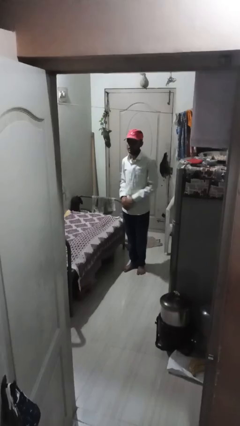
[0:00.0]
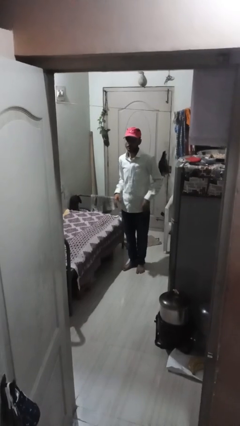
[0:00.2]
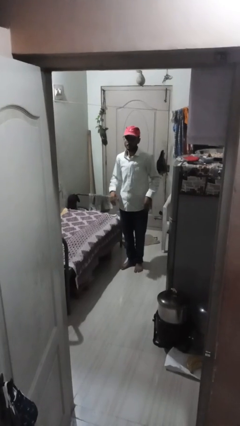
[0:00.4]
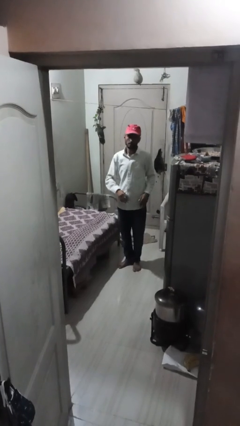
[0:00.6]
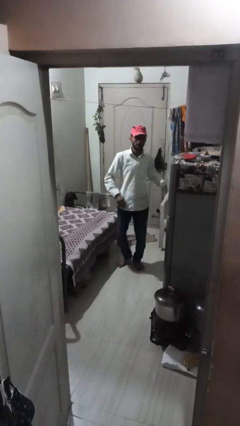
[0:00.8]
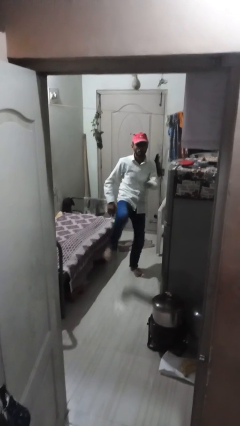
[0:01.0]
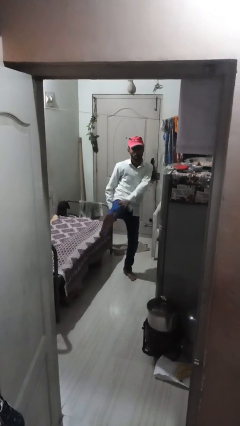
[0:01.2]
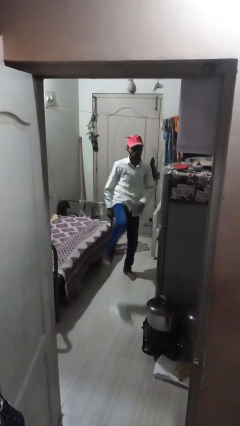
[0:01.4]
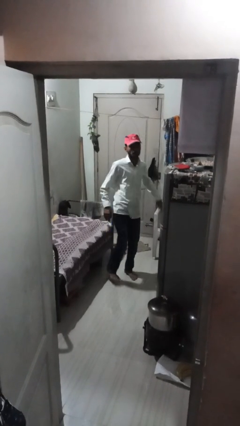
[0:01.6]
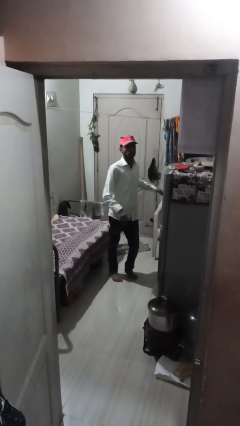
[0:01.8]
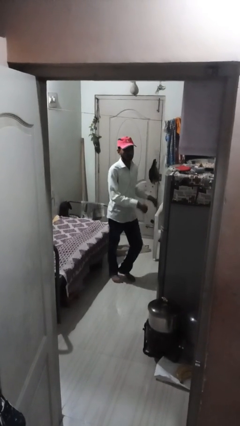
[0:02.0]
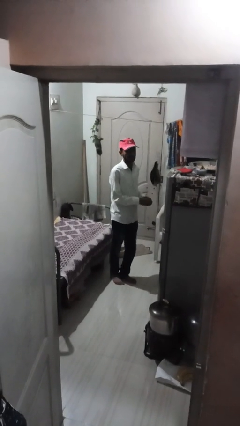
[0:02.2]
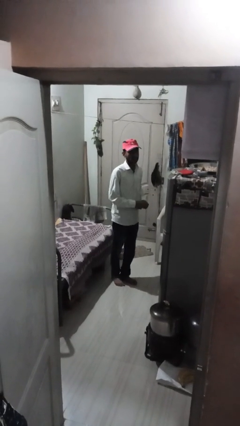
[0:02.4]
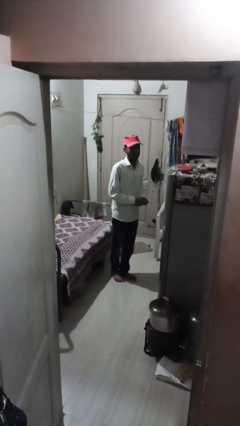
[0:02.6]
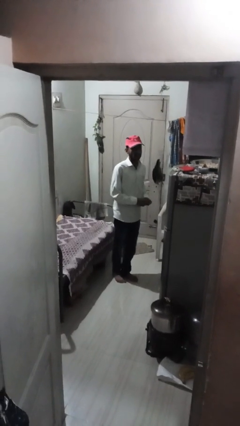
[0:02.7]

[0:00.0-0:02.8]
person karate kicks

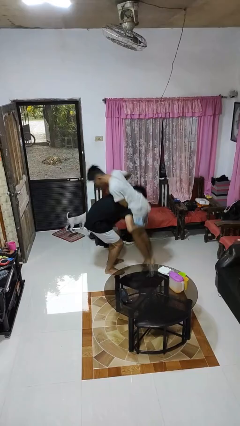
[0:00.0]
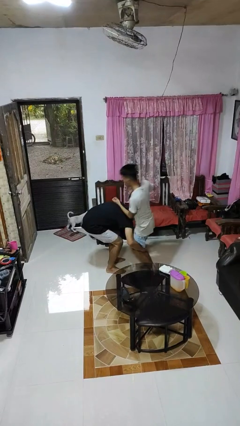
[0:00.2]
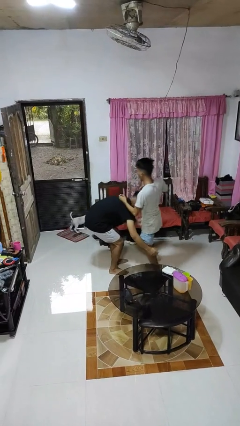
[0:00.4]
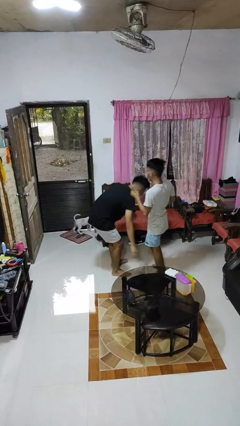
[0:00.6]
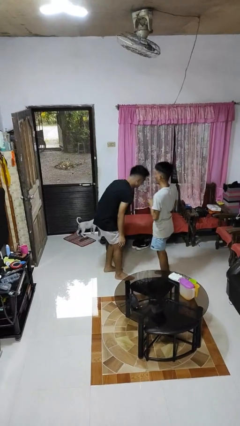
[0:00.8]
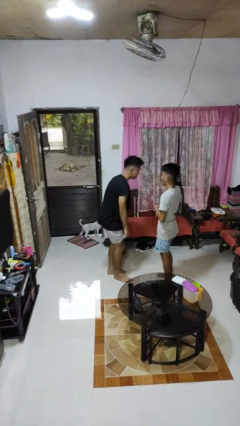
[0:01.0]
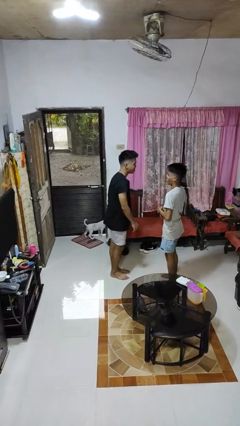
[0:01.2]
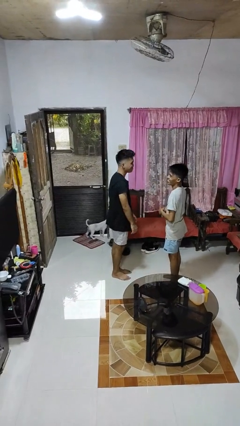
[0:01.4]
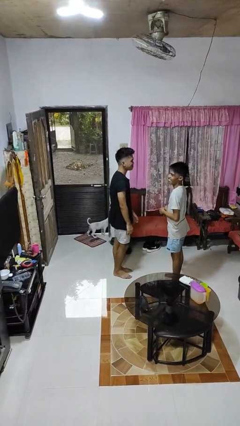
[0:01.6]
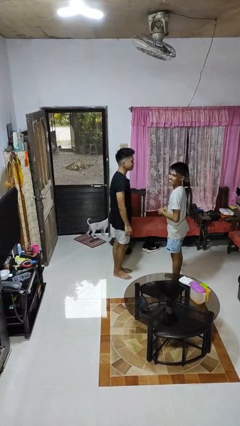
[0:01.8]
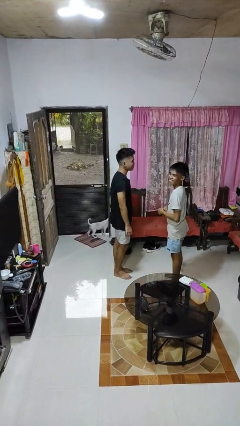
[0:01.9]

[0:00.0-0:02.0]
person puts down person

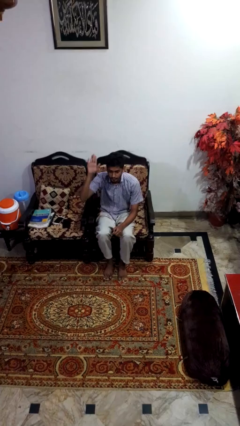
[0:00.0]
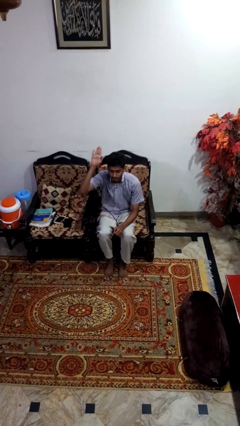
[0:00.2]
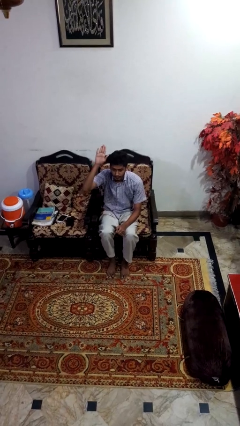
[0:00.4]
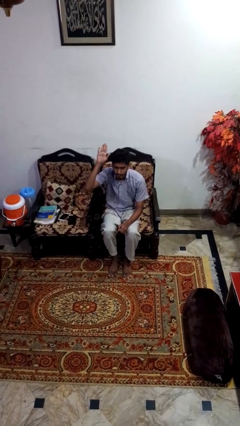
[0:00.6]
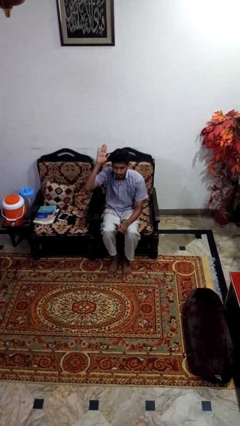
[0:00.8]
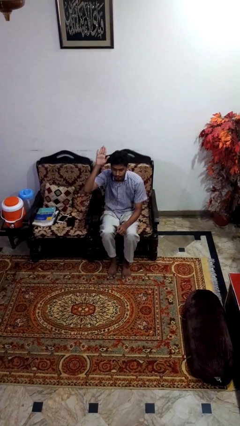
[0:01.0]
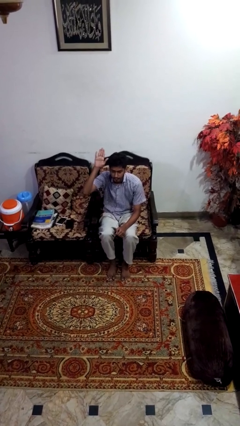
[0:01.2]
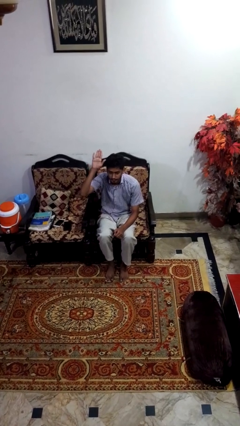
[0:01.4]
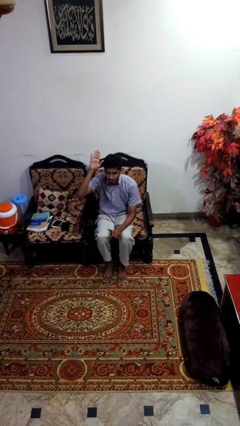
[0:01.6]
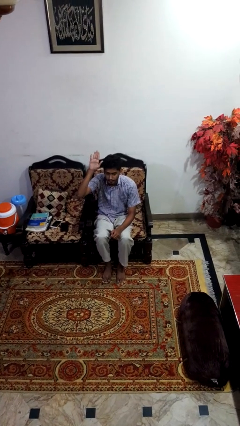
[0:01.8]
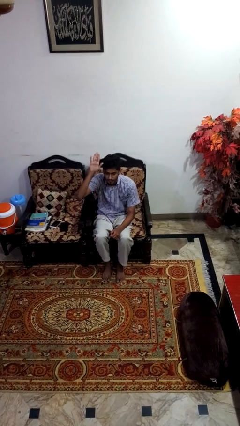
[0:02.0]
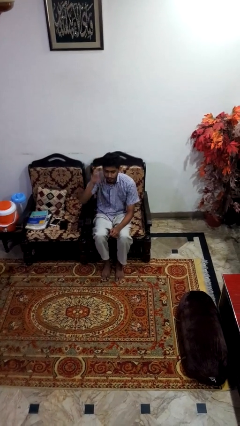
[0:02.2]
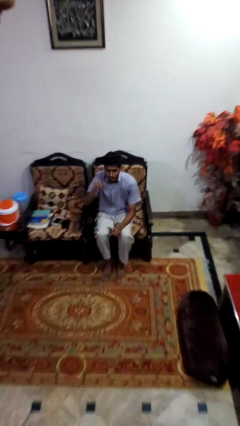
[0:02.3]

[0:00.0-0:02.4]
person gestures raise hand

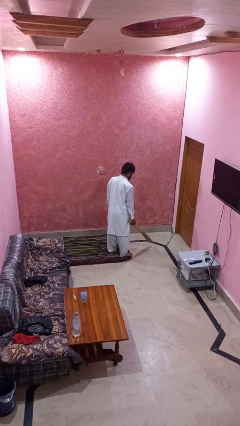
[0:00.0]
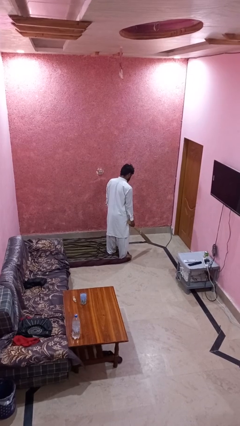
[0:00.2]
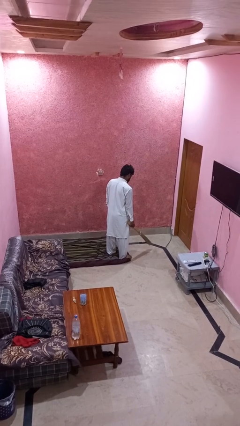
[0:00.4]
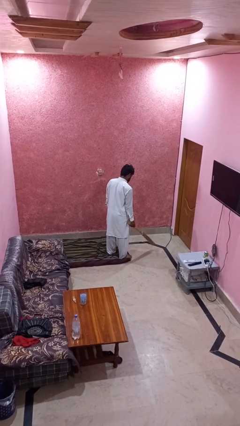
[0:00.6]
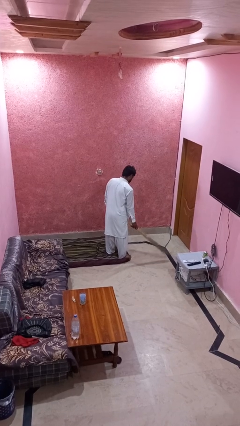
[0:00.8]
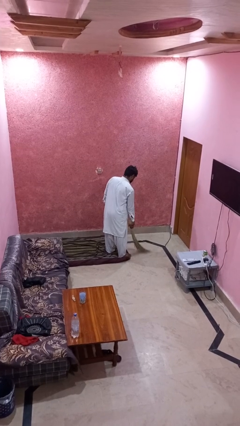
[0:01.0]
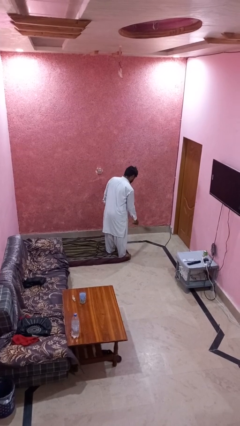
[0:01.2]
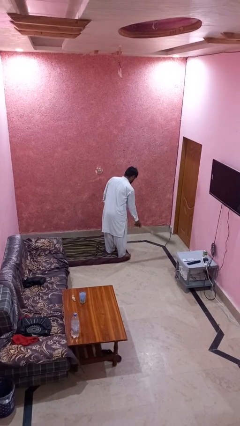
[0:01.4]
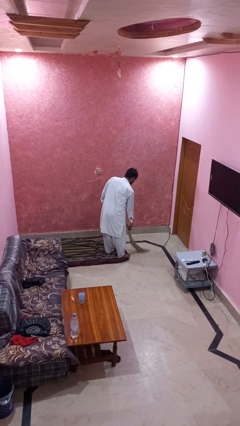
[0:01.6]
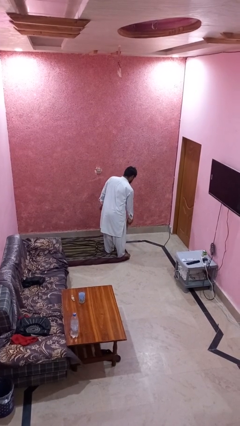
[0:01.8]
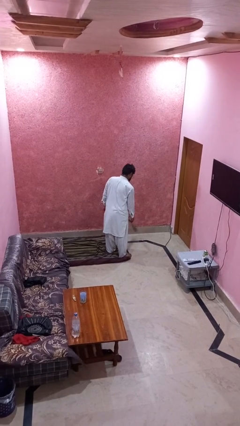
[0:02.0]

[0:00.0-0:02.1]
person sweeps floor

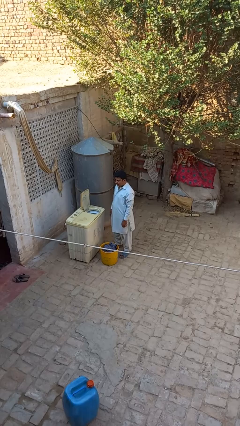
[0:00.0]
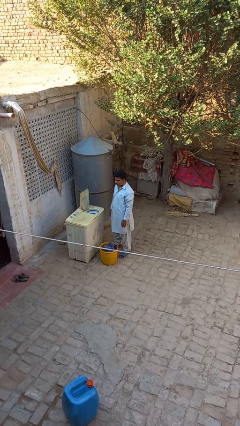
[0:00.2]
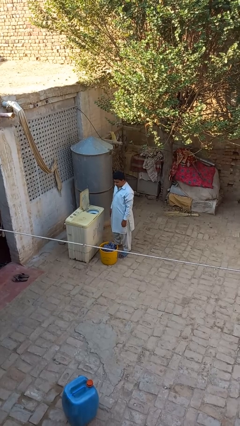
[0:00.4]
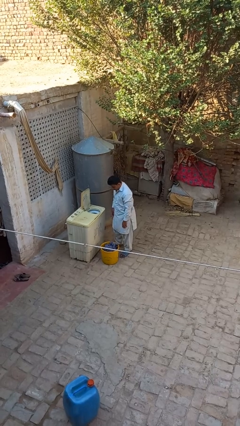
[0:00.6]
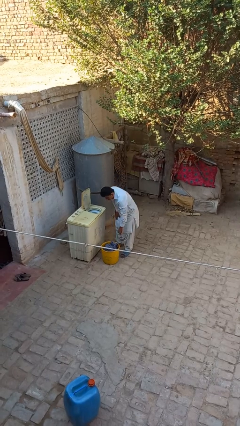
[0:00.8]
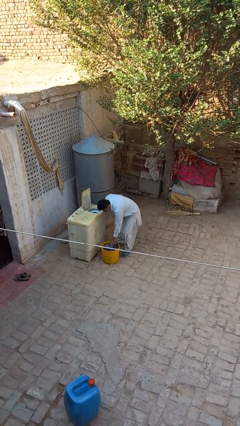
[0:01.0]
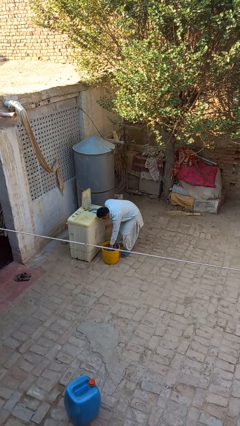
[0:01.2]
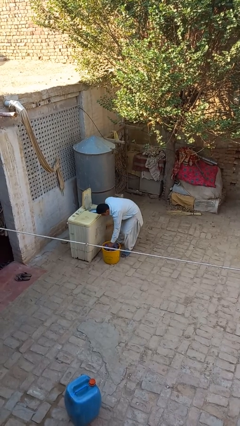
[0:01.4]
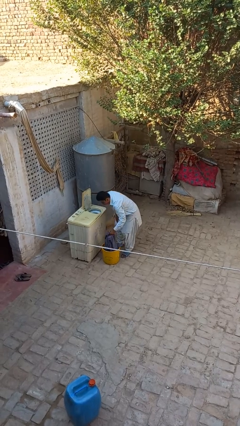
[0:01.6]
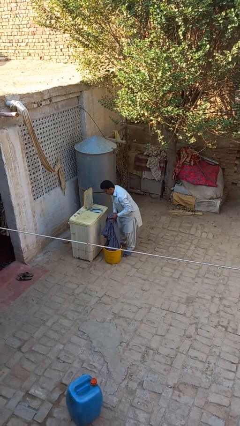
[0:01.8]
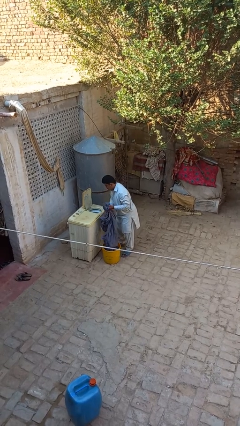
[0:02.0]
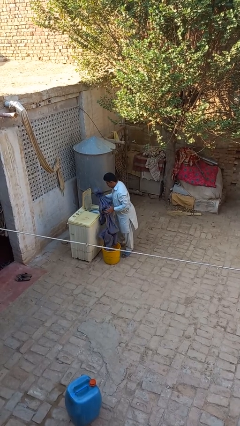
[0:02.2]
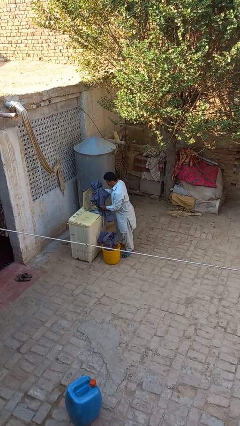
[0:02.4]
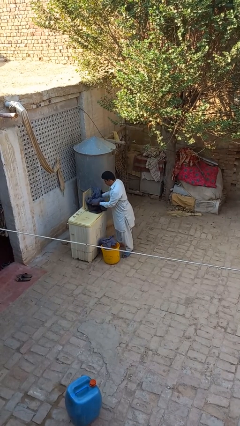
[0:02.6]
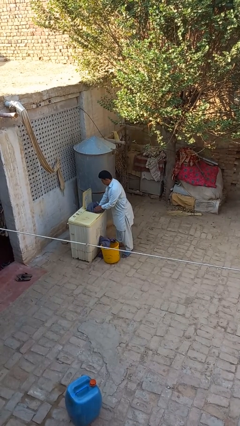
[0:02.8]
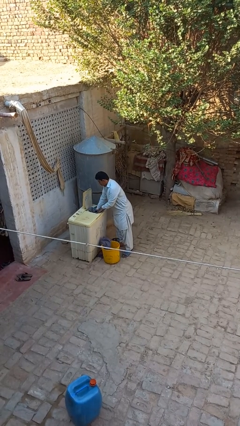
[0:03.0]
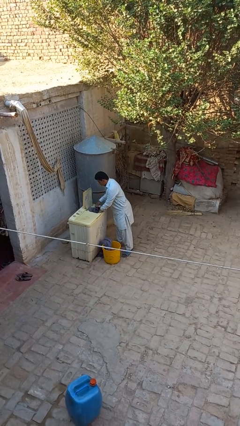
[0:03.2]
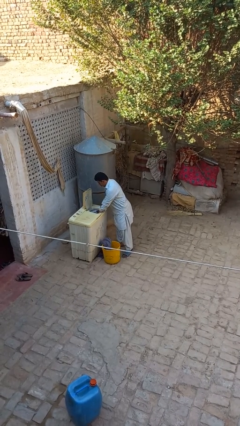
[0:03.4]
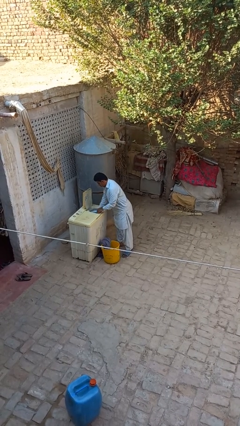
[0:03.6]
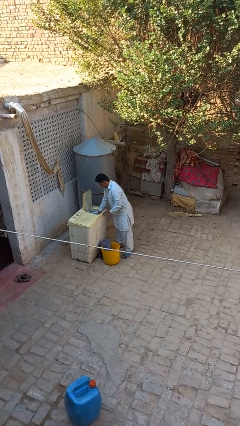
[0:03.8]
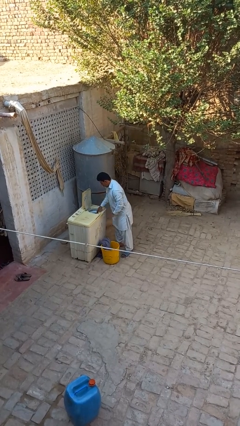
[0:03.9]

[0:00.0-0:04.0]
person loads dryer

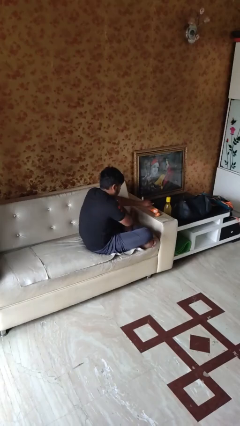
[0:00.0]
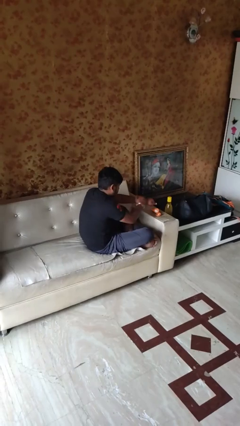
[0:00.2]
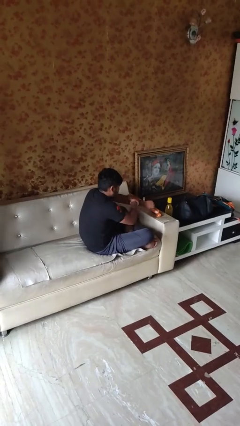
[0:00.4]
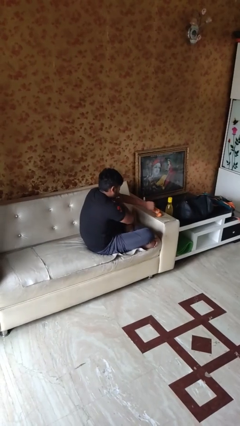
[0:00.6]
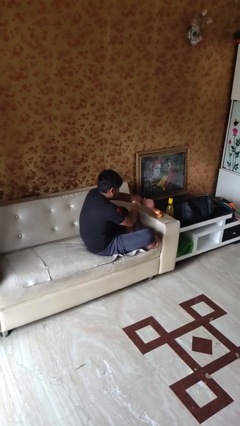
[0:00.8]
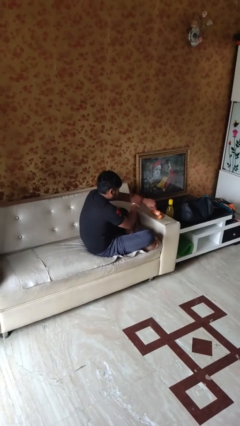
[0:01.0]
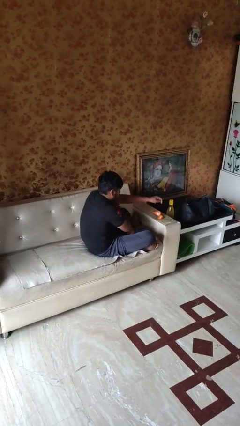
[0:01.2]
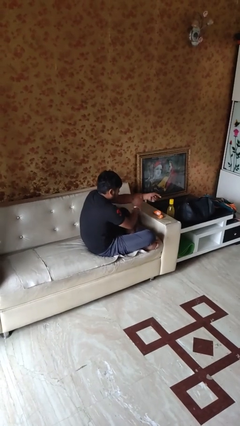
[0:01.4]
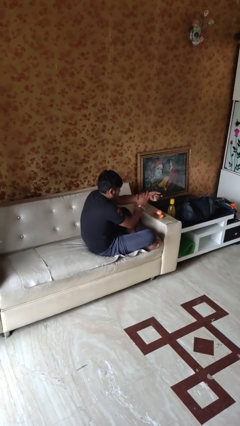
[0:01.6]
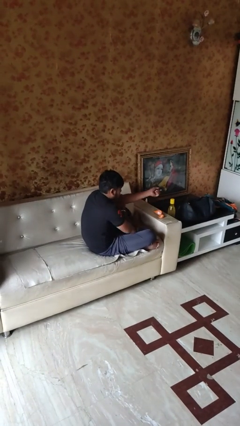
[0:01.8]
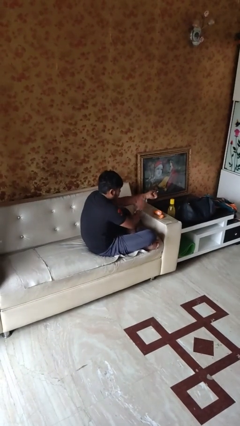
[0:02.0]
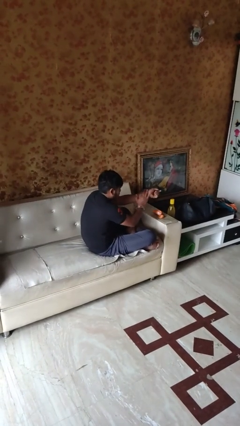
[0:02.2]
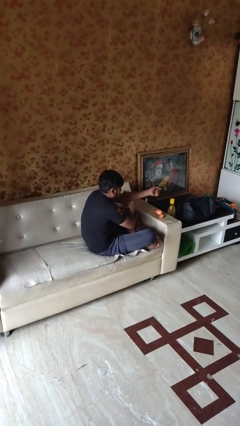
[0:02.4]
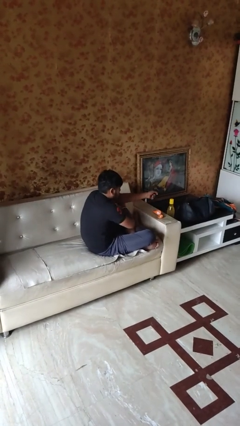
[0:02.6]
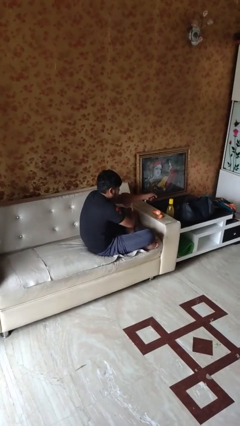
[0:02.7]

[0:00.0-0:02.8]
person applies sunscreen

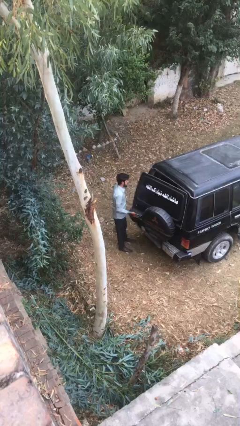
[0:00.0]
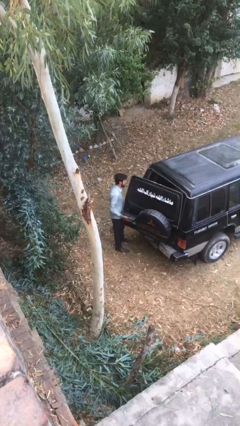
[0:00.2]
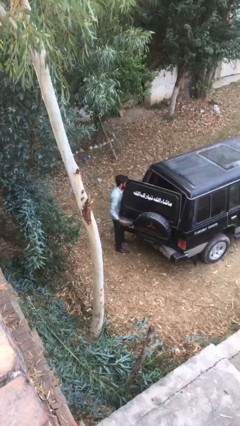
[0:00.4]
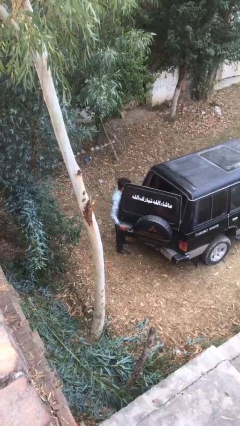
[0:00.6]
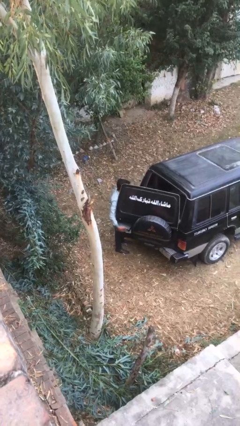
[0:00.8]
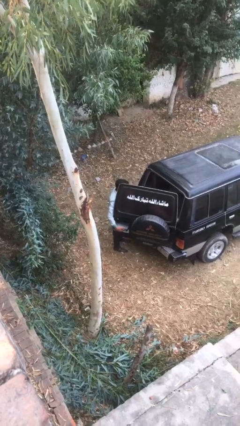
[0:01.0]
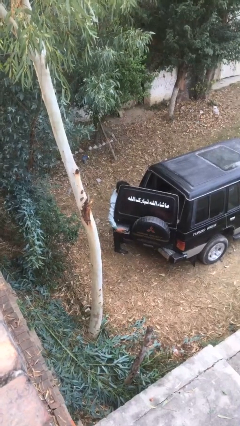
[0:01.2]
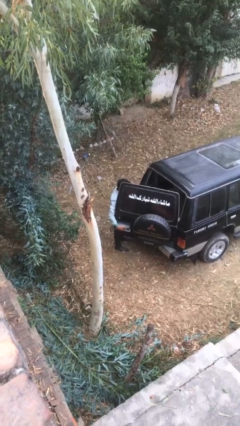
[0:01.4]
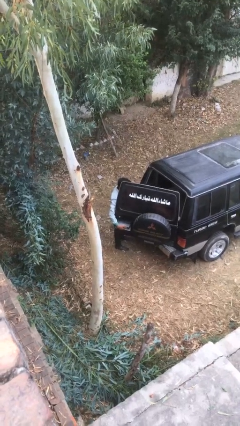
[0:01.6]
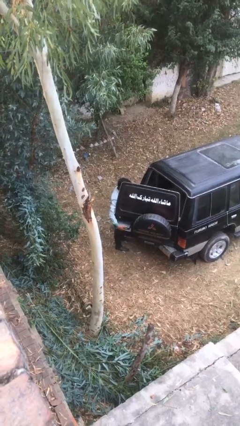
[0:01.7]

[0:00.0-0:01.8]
person opens car trunk
